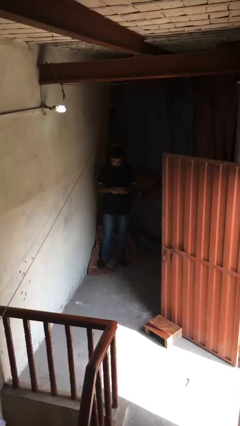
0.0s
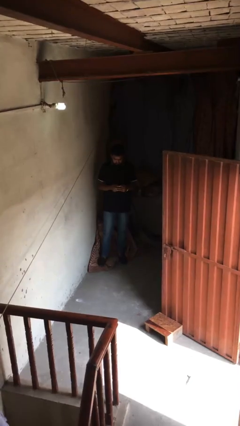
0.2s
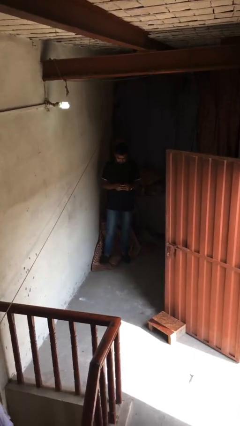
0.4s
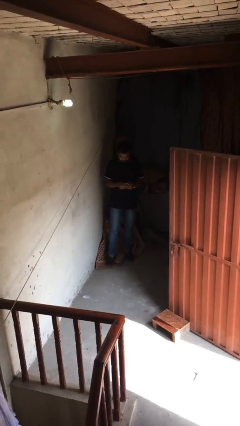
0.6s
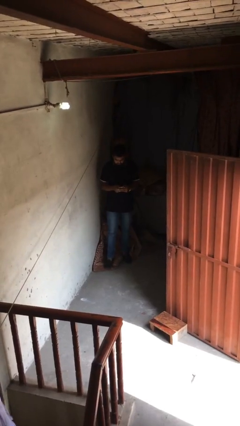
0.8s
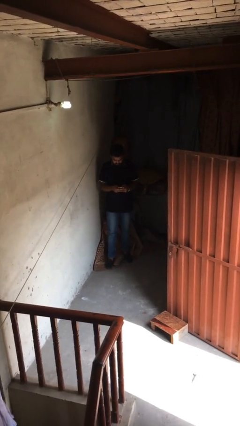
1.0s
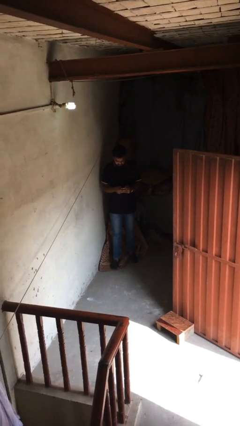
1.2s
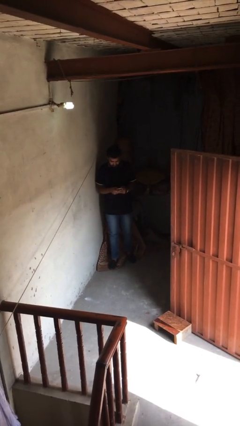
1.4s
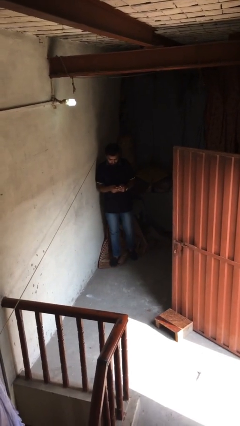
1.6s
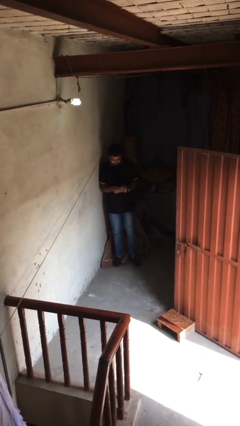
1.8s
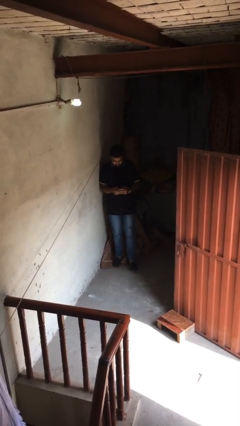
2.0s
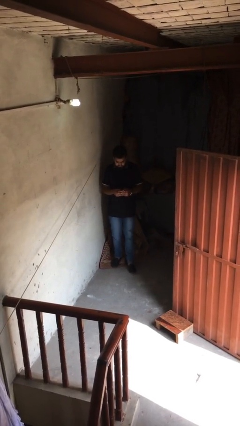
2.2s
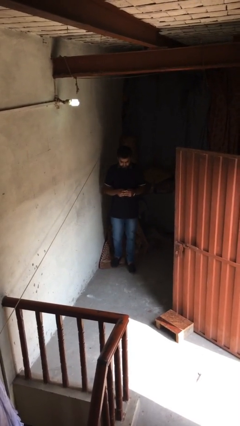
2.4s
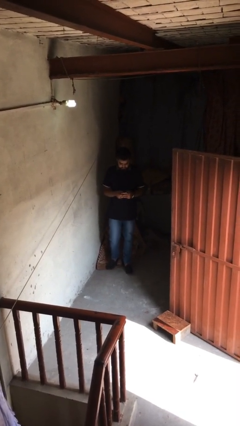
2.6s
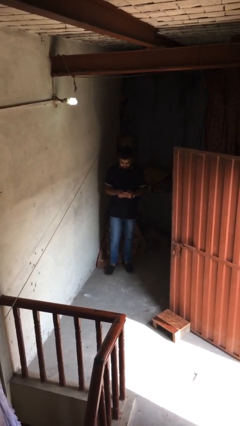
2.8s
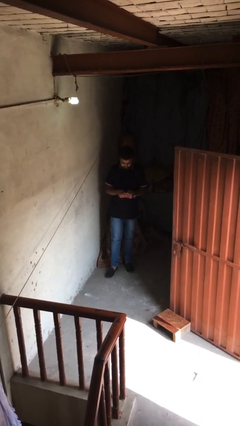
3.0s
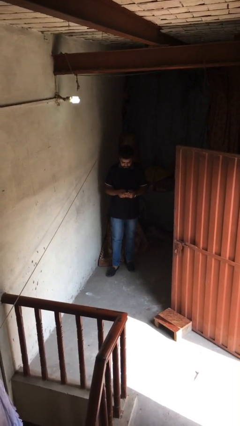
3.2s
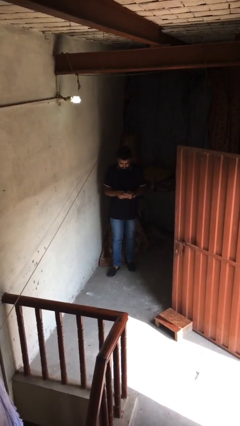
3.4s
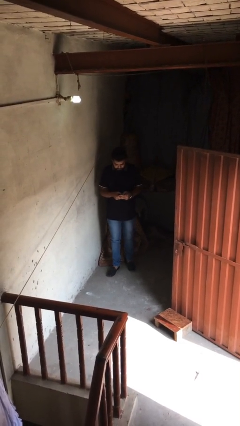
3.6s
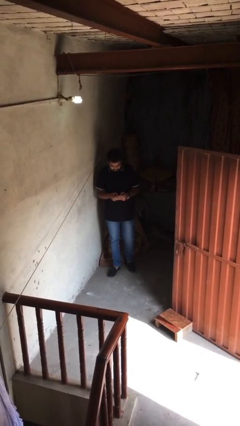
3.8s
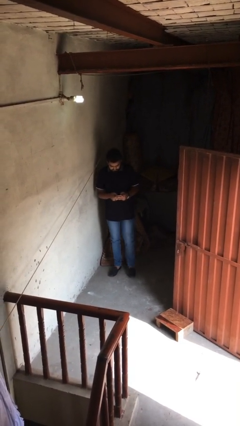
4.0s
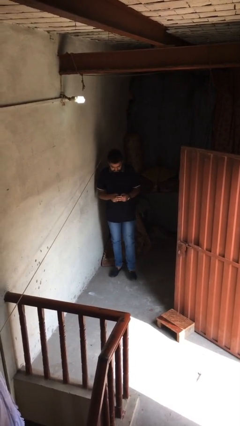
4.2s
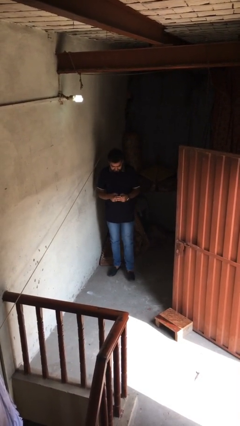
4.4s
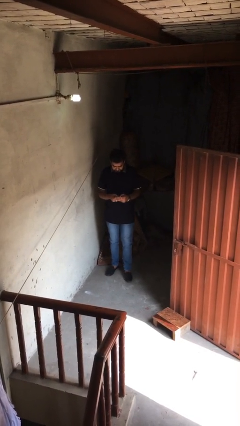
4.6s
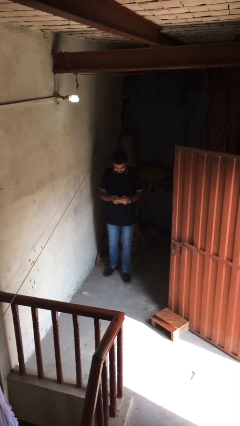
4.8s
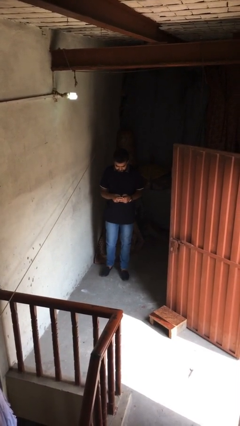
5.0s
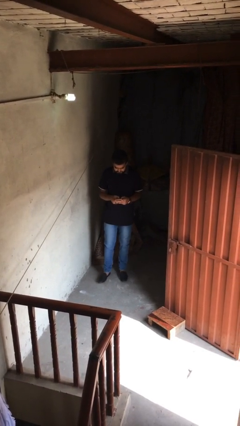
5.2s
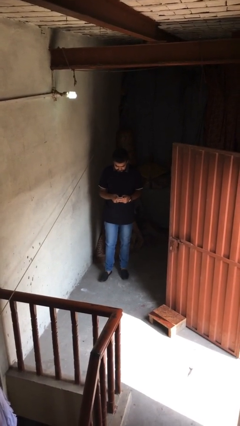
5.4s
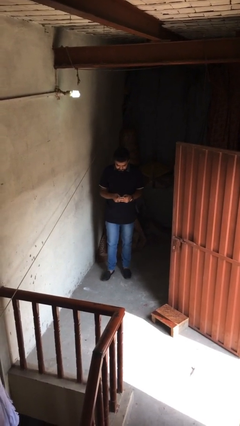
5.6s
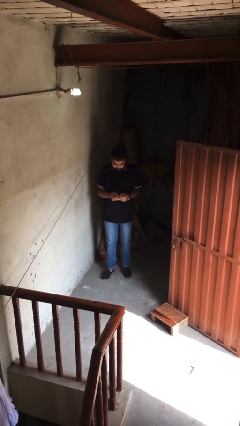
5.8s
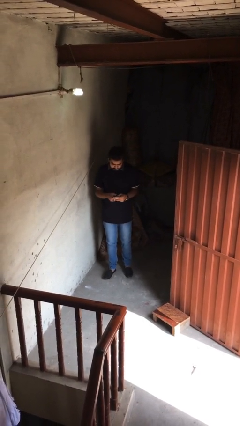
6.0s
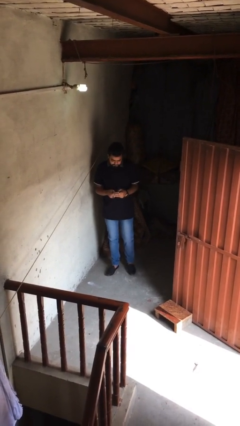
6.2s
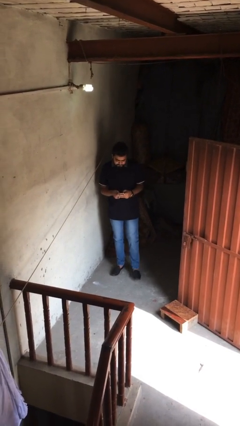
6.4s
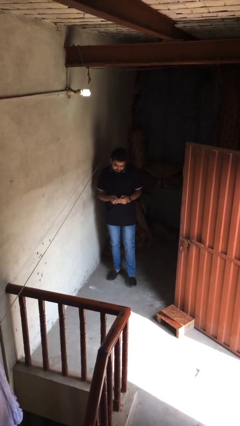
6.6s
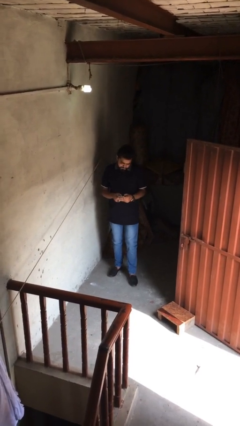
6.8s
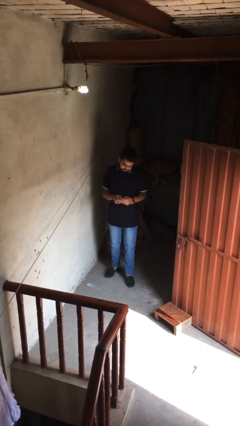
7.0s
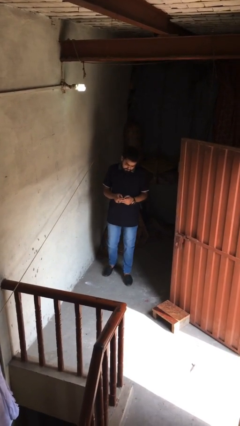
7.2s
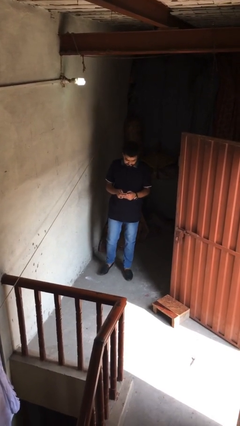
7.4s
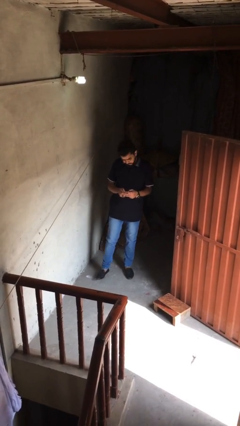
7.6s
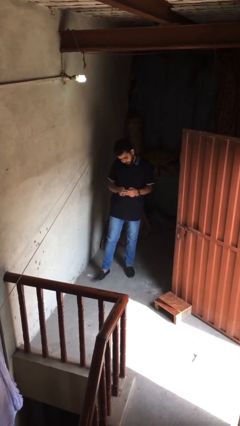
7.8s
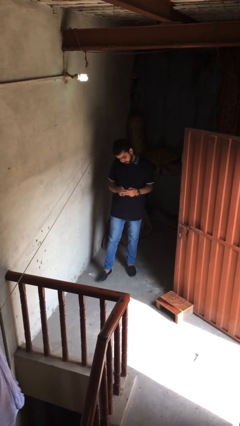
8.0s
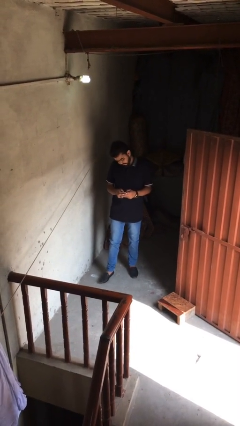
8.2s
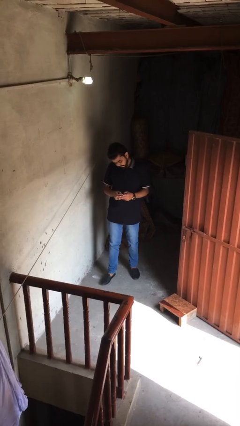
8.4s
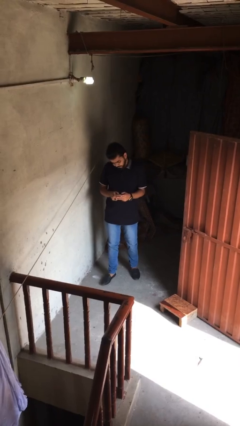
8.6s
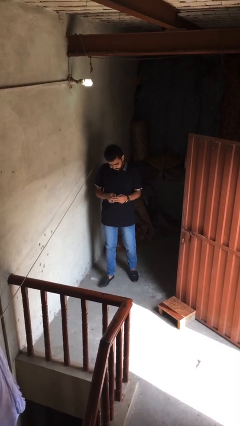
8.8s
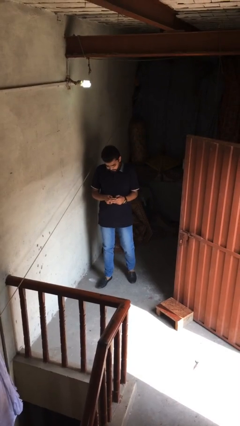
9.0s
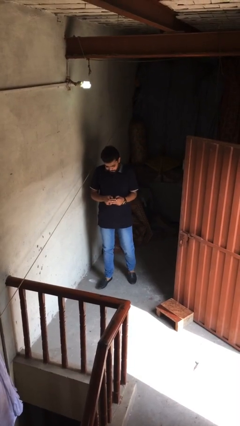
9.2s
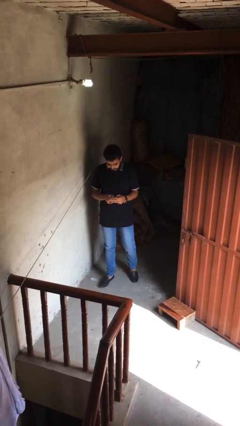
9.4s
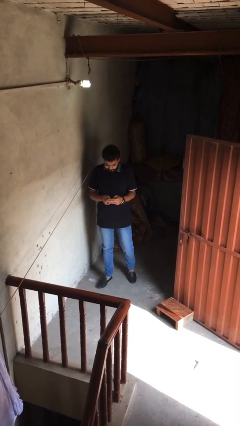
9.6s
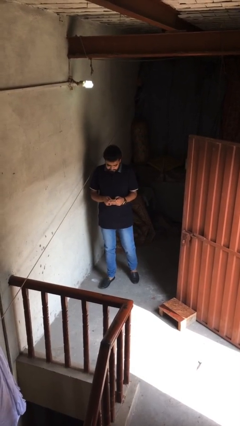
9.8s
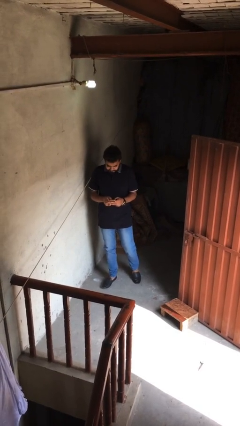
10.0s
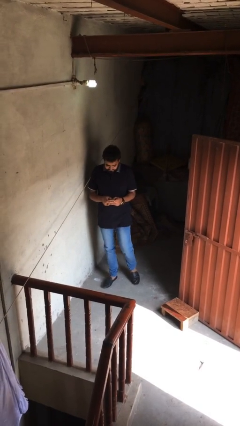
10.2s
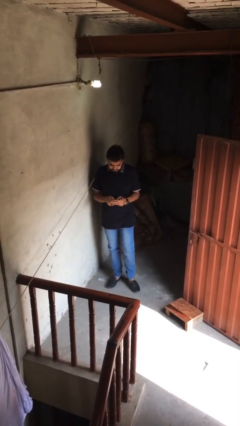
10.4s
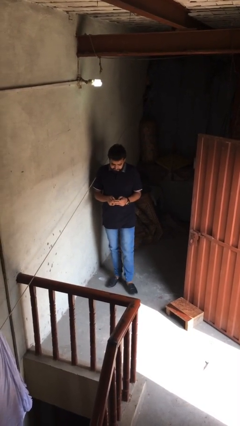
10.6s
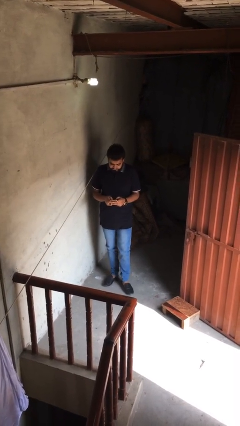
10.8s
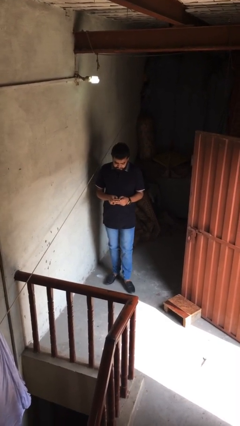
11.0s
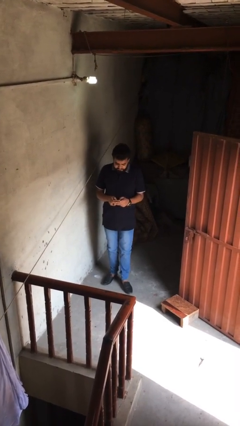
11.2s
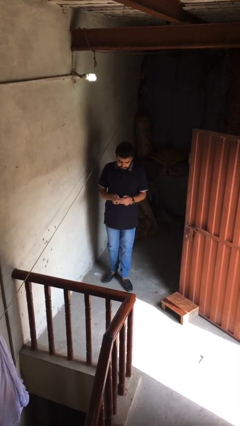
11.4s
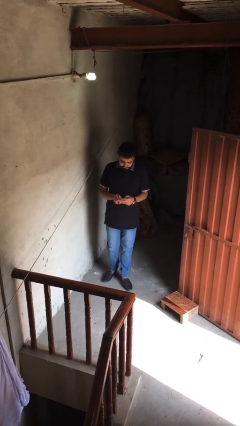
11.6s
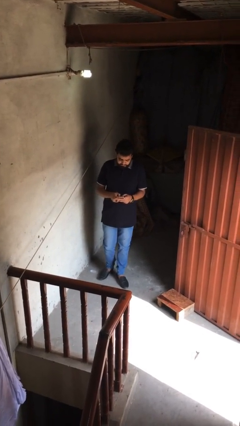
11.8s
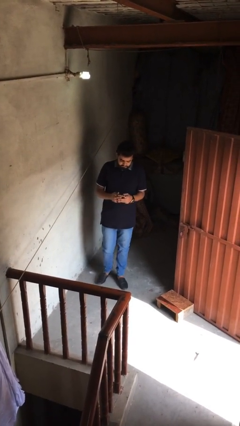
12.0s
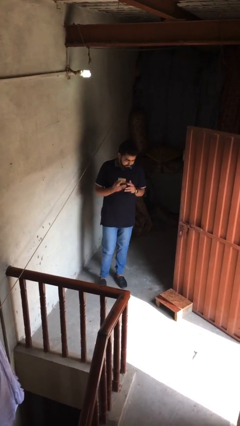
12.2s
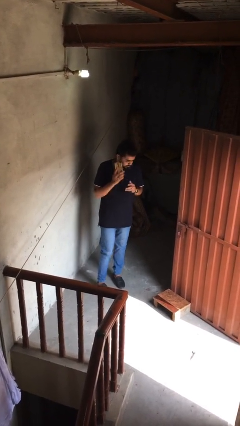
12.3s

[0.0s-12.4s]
person texts on phone

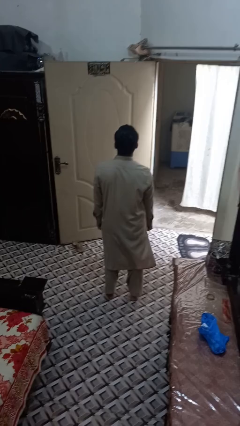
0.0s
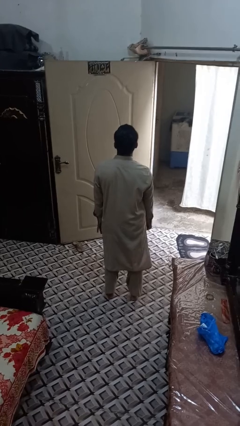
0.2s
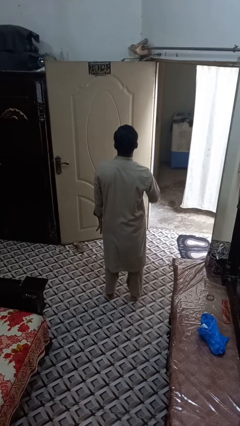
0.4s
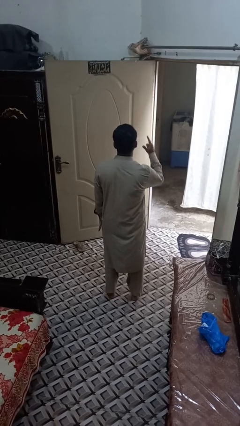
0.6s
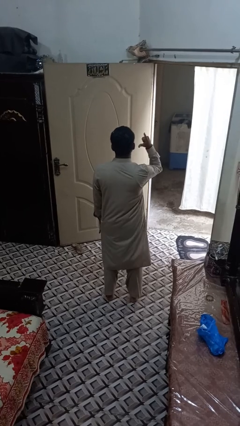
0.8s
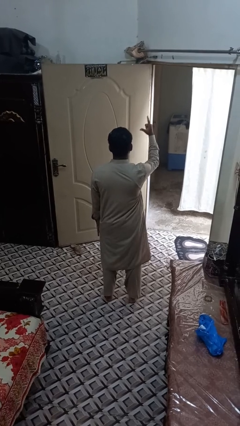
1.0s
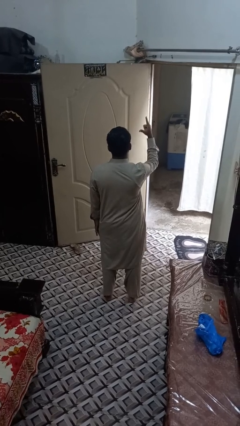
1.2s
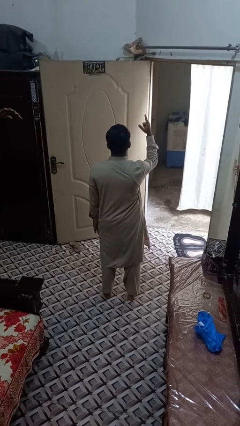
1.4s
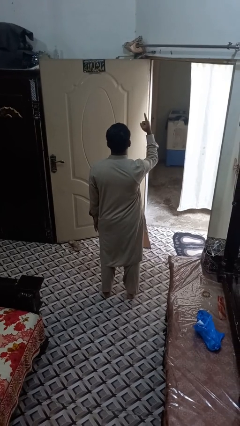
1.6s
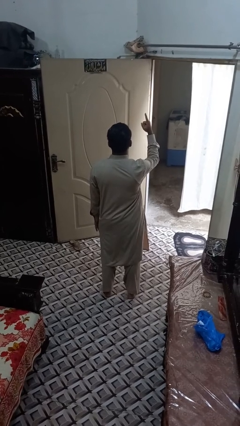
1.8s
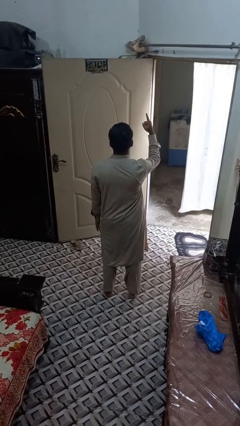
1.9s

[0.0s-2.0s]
person gestures number one

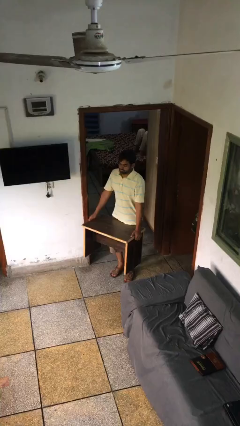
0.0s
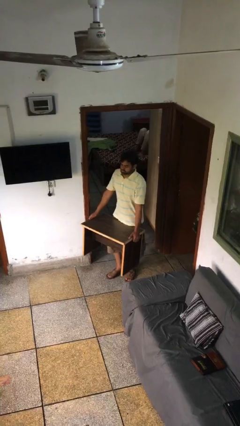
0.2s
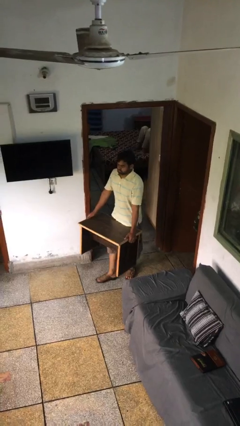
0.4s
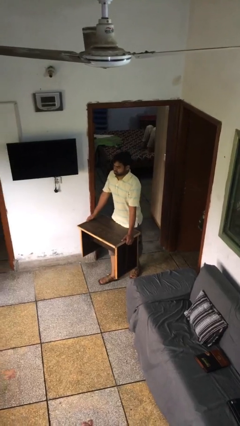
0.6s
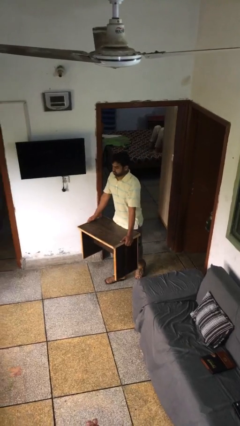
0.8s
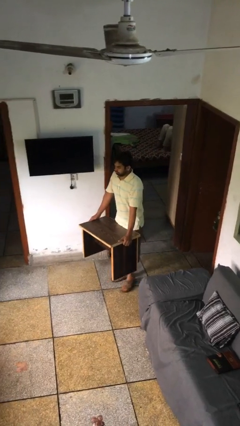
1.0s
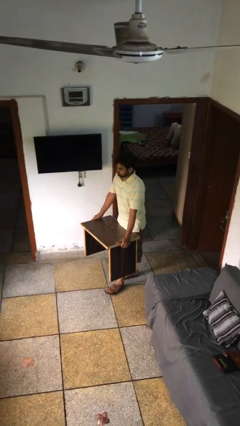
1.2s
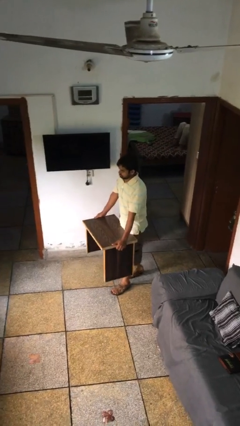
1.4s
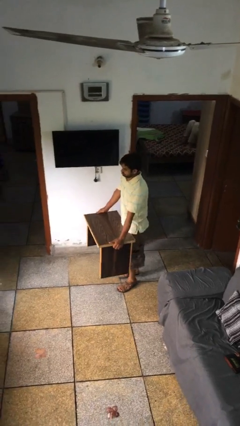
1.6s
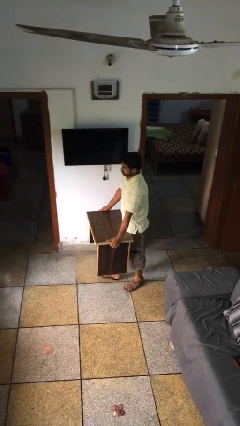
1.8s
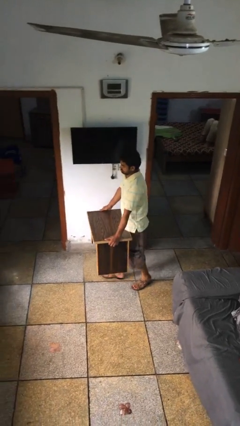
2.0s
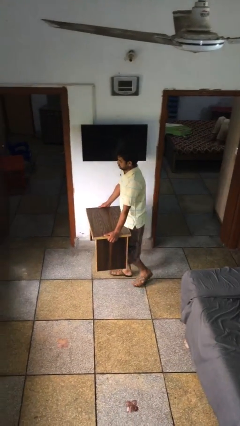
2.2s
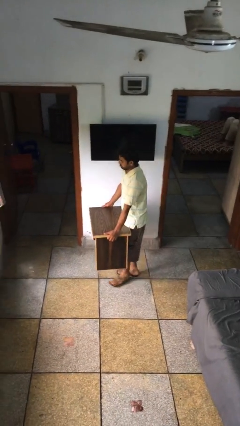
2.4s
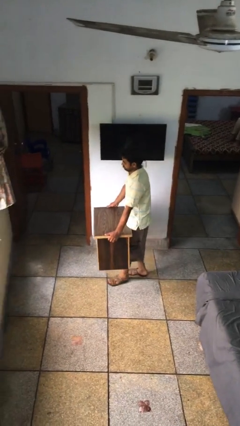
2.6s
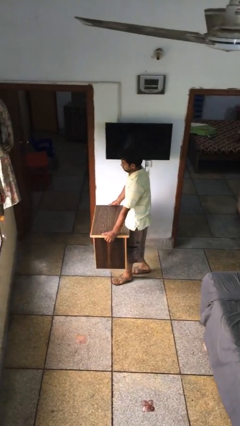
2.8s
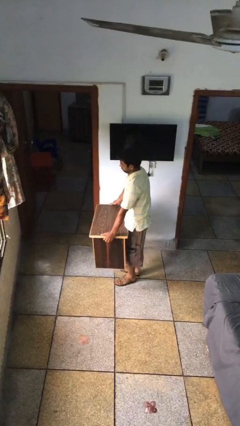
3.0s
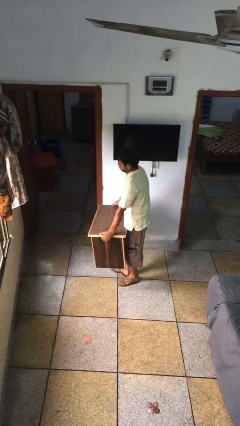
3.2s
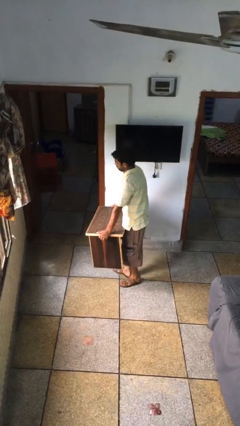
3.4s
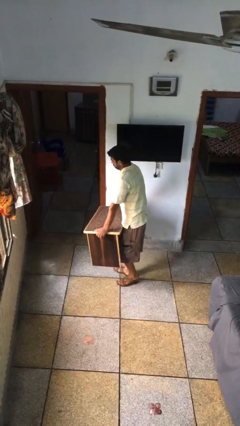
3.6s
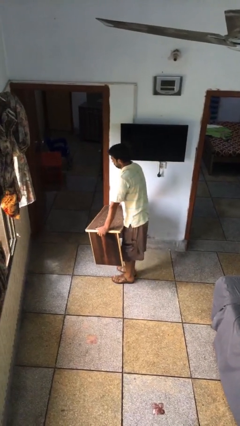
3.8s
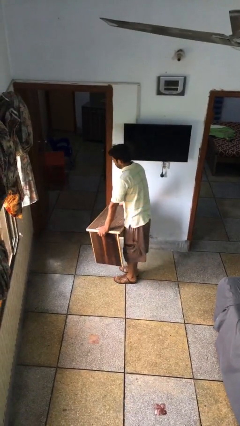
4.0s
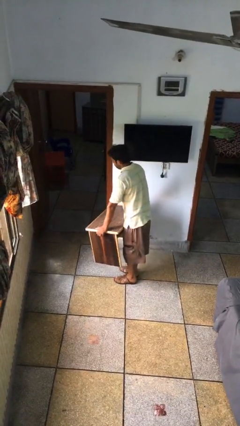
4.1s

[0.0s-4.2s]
person carries heavy object
